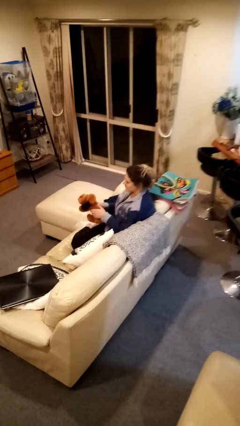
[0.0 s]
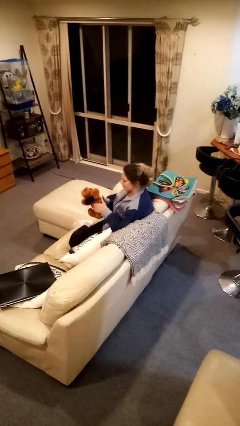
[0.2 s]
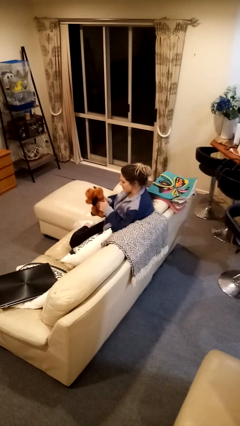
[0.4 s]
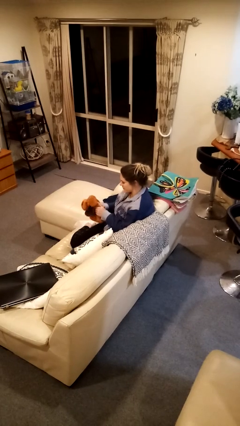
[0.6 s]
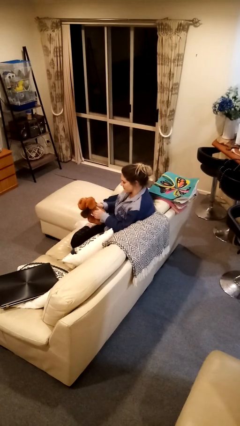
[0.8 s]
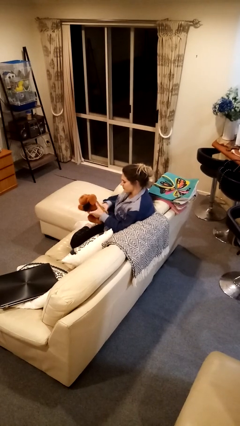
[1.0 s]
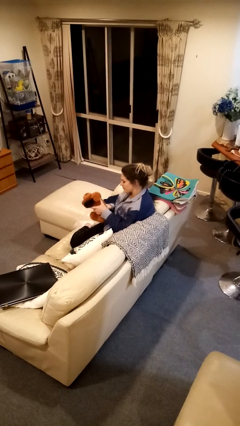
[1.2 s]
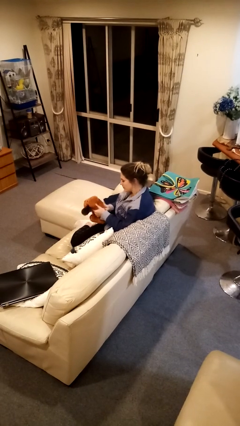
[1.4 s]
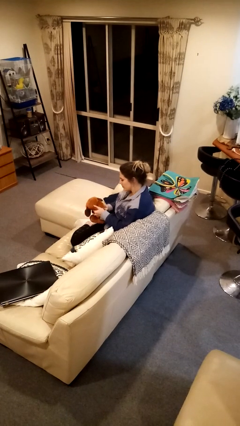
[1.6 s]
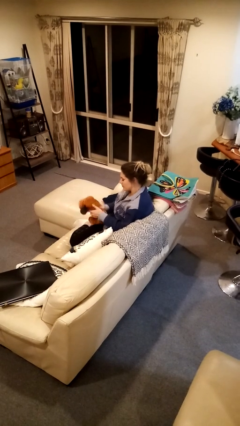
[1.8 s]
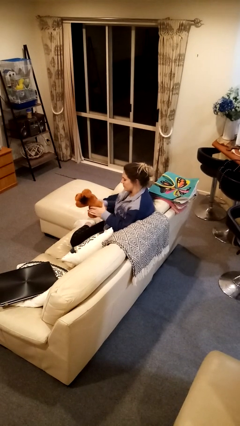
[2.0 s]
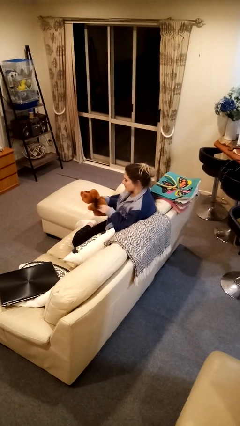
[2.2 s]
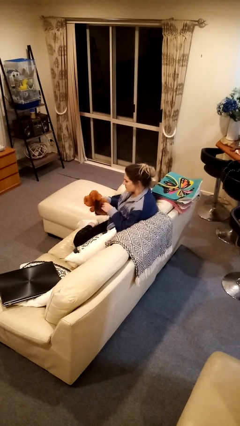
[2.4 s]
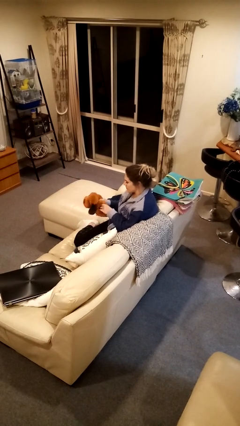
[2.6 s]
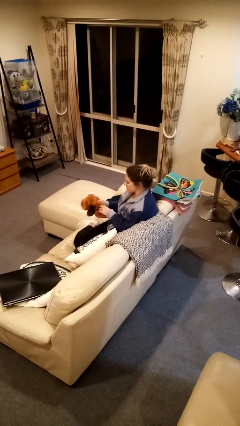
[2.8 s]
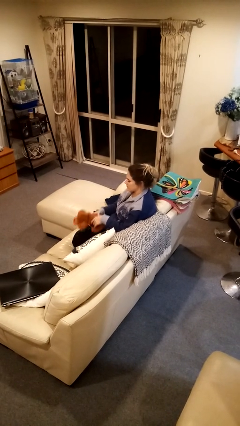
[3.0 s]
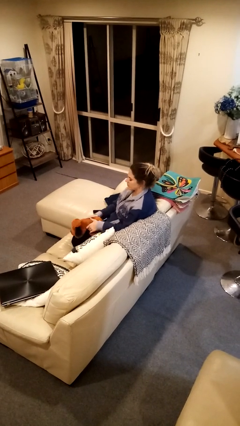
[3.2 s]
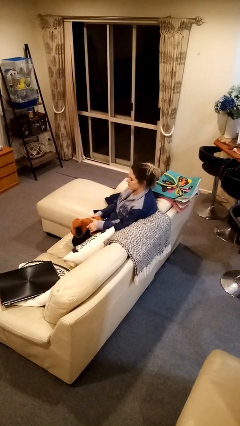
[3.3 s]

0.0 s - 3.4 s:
person squeezes object

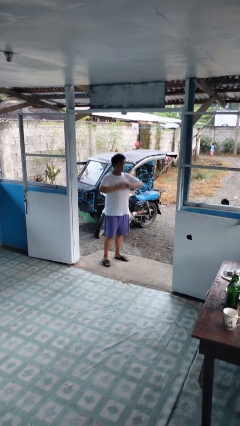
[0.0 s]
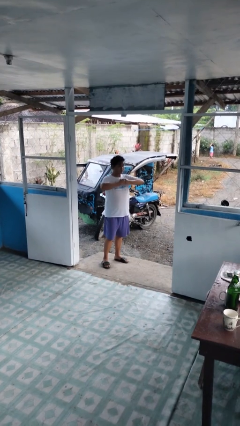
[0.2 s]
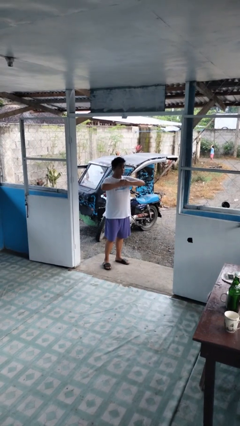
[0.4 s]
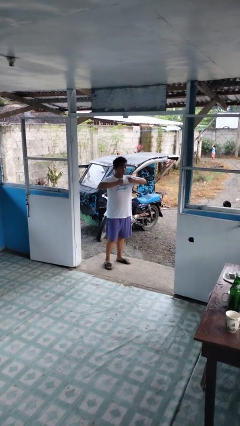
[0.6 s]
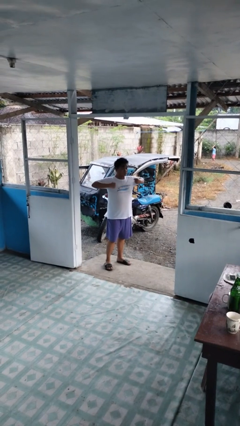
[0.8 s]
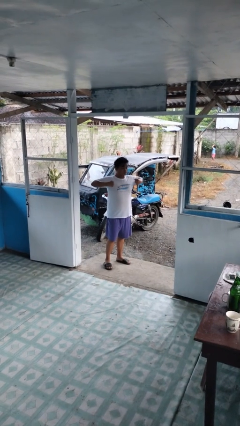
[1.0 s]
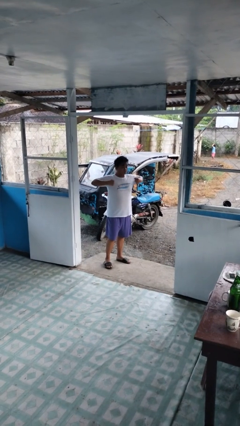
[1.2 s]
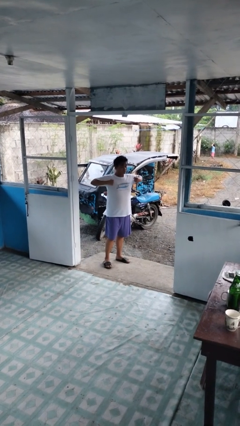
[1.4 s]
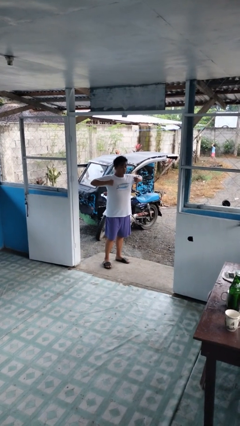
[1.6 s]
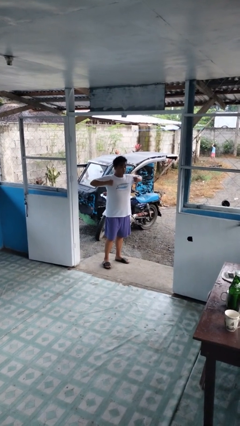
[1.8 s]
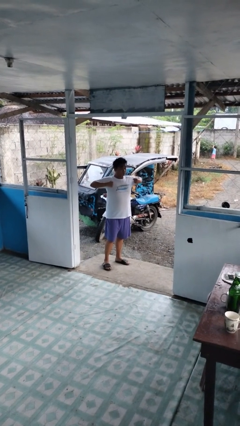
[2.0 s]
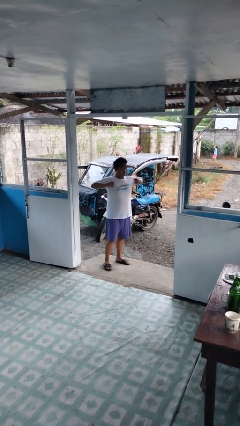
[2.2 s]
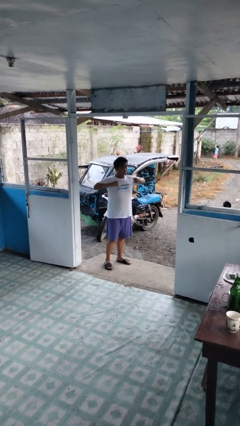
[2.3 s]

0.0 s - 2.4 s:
person gestures zoom in

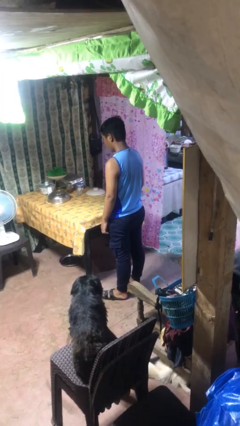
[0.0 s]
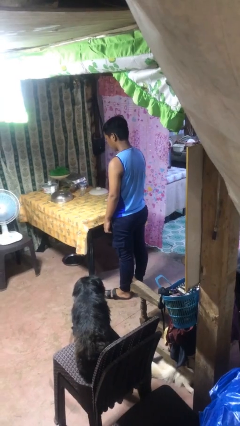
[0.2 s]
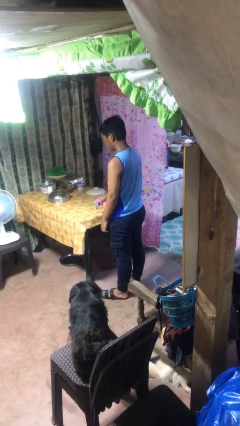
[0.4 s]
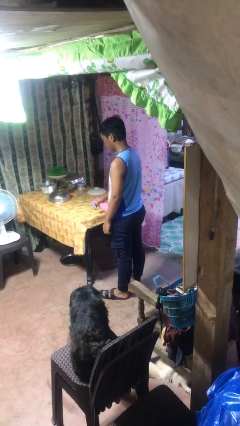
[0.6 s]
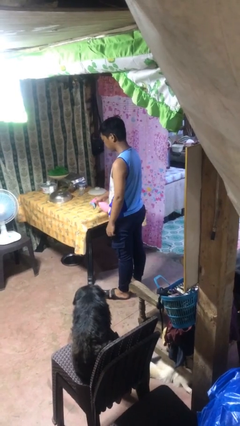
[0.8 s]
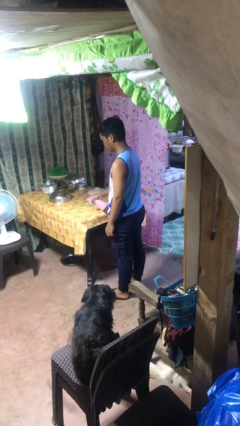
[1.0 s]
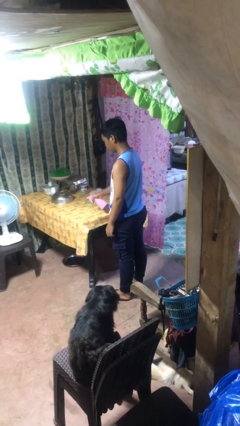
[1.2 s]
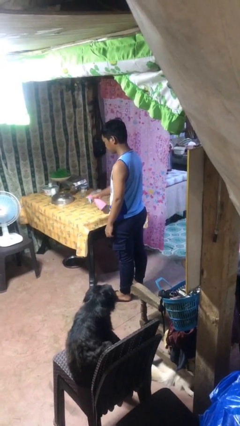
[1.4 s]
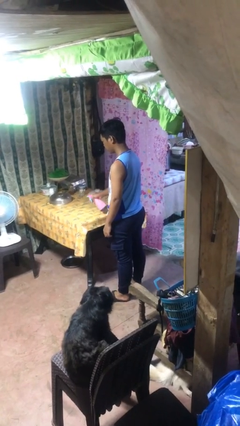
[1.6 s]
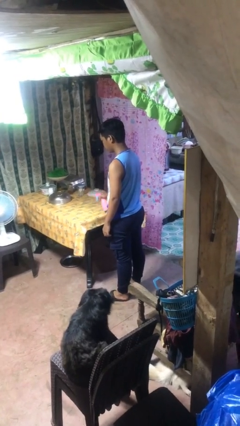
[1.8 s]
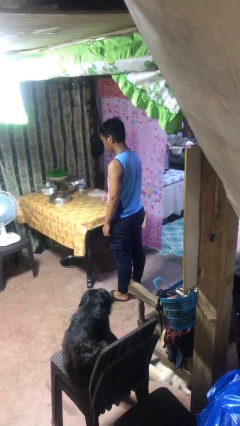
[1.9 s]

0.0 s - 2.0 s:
person sprays from bottle

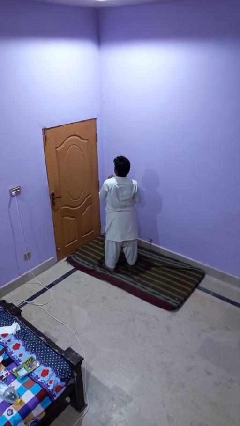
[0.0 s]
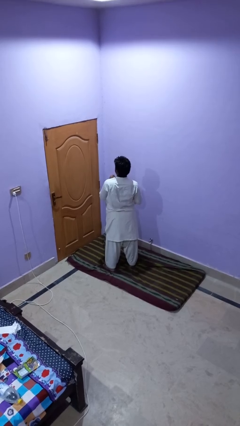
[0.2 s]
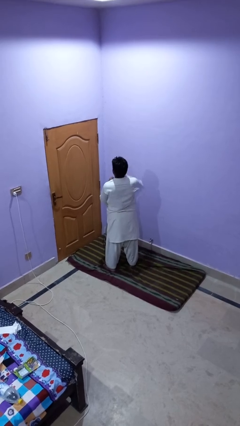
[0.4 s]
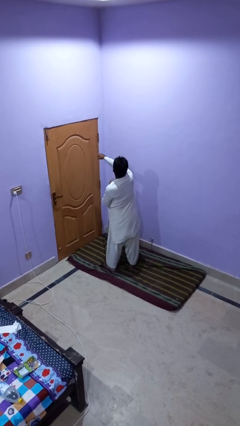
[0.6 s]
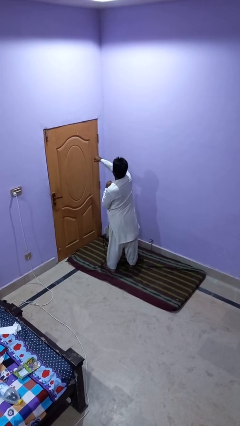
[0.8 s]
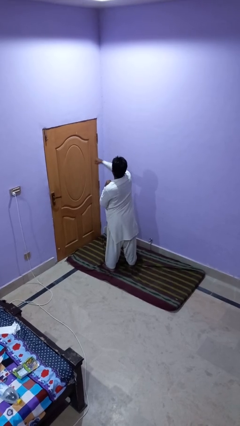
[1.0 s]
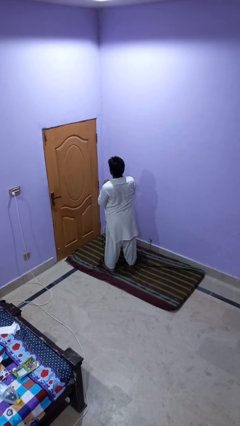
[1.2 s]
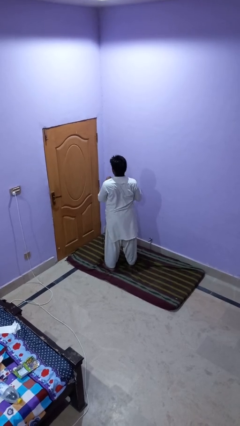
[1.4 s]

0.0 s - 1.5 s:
person punches

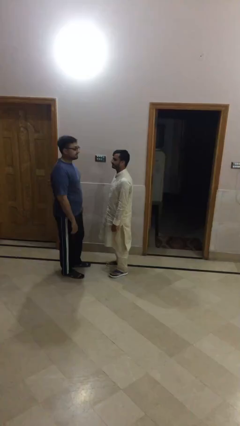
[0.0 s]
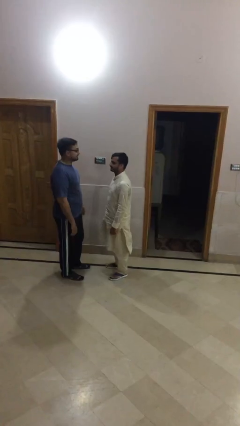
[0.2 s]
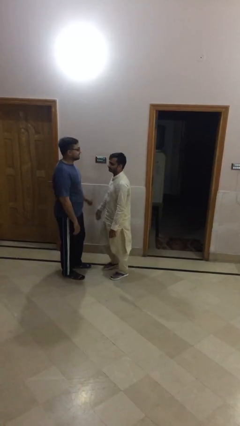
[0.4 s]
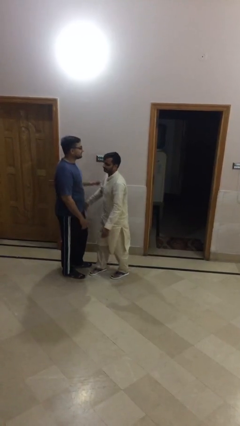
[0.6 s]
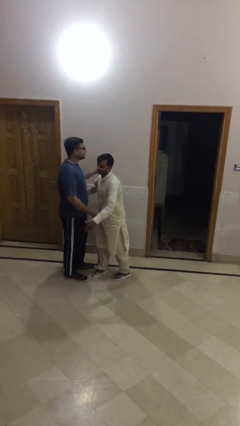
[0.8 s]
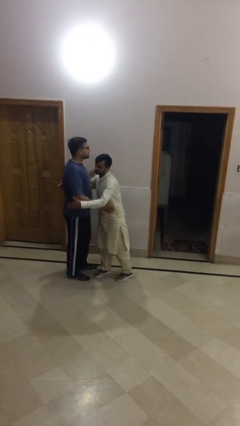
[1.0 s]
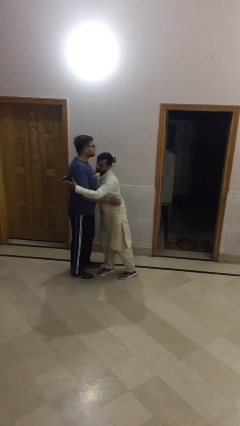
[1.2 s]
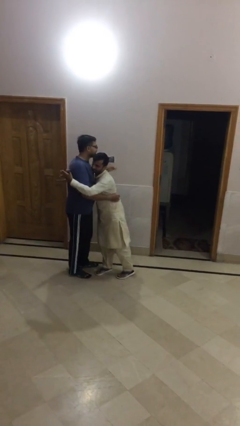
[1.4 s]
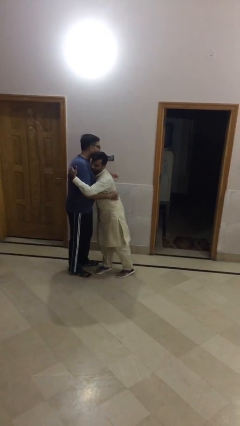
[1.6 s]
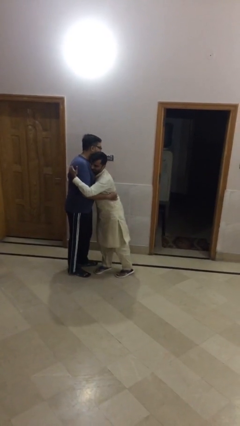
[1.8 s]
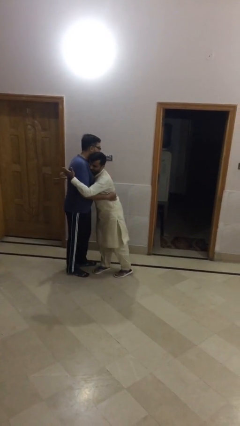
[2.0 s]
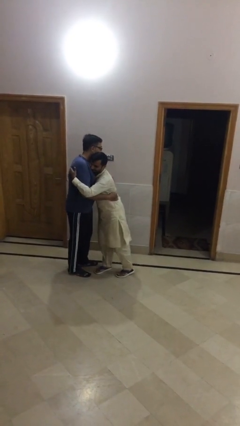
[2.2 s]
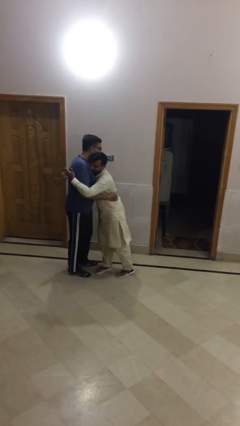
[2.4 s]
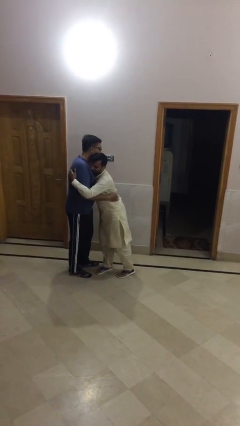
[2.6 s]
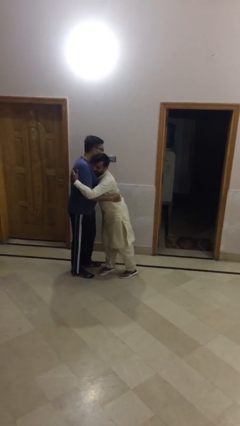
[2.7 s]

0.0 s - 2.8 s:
person embraces person

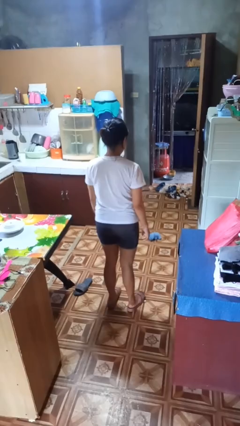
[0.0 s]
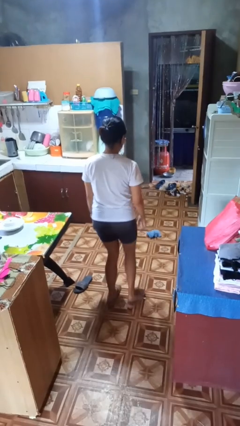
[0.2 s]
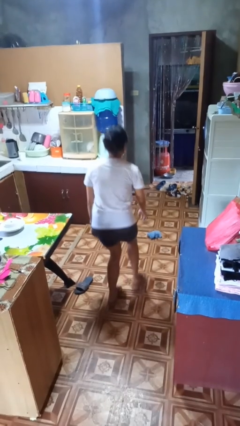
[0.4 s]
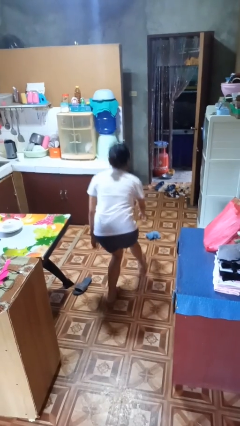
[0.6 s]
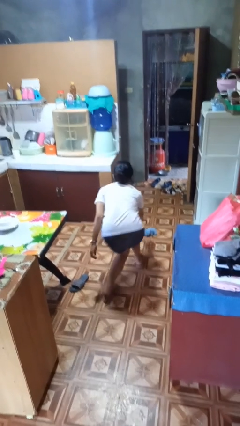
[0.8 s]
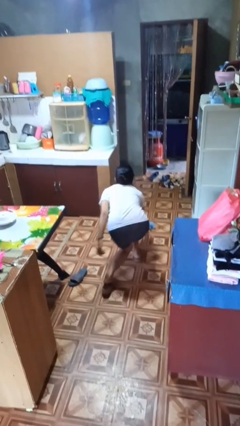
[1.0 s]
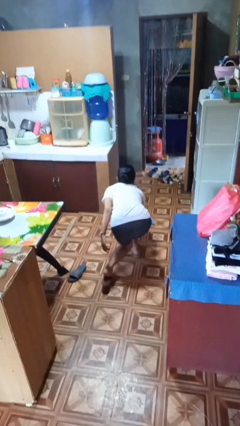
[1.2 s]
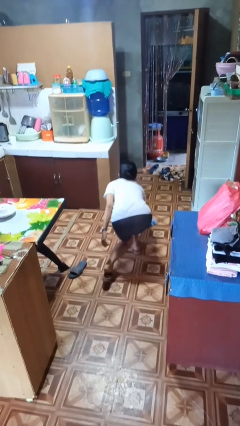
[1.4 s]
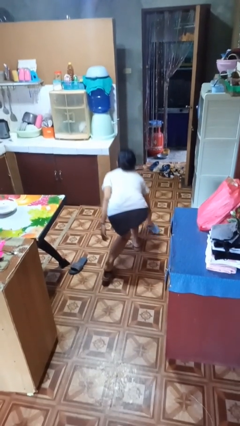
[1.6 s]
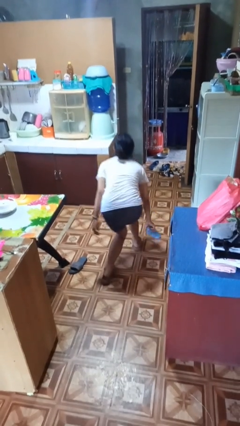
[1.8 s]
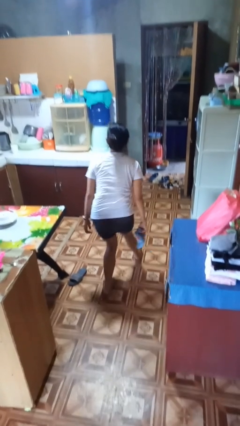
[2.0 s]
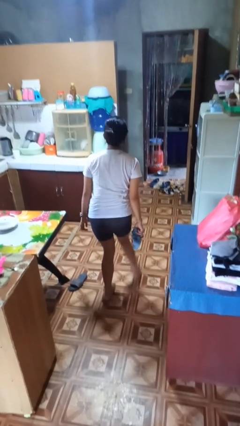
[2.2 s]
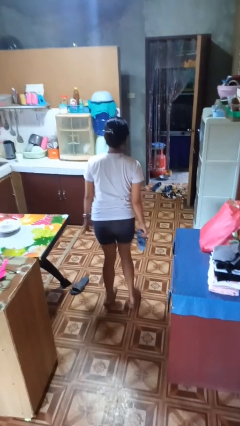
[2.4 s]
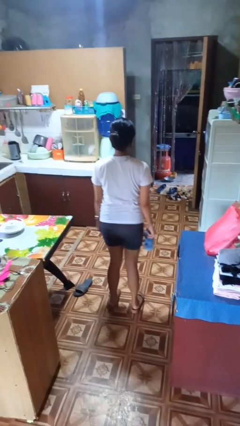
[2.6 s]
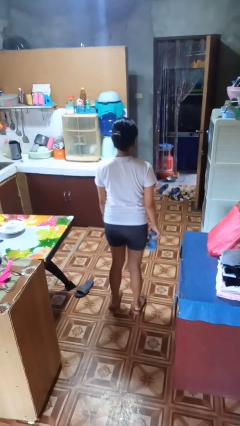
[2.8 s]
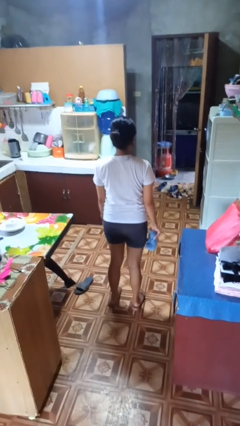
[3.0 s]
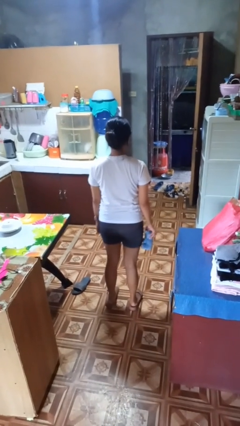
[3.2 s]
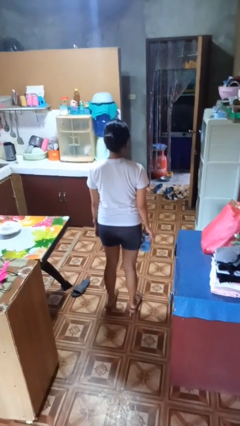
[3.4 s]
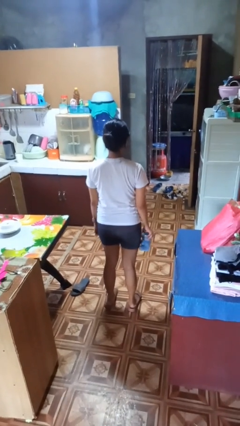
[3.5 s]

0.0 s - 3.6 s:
person picks up object from floor

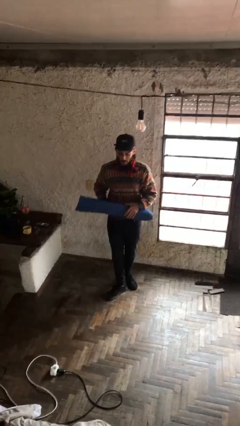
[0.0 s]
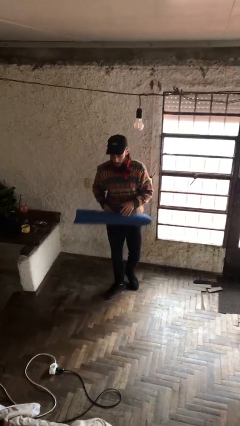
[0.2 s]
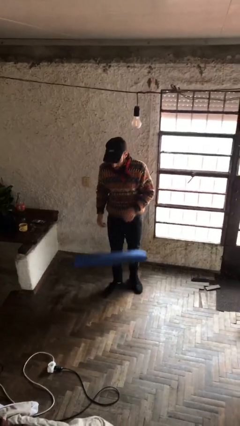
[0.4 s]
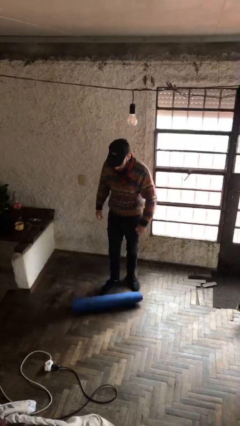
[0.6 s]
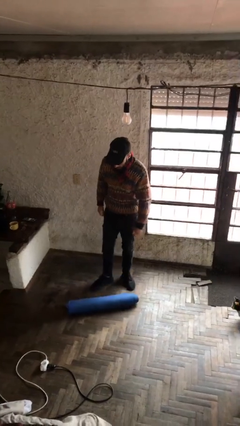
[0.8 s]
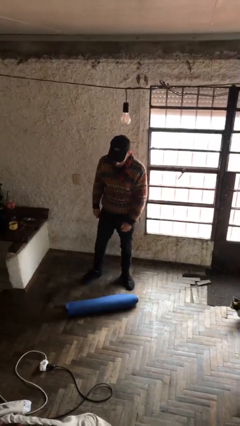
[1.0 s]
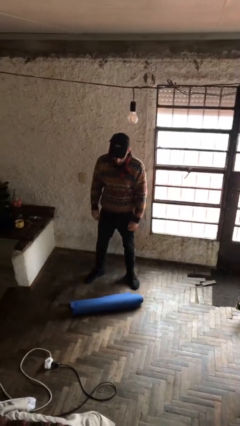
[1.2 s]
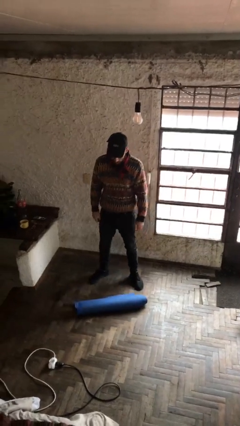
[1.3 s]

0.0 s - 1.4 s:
person drops object
